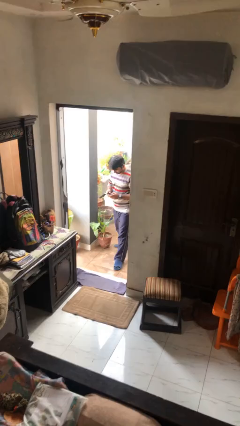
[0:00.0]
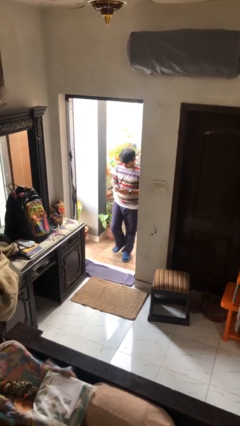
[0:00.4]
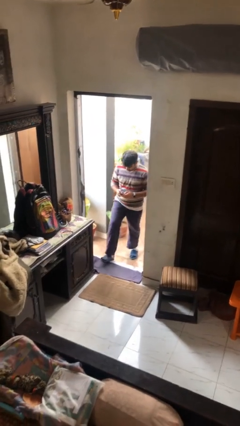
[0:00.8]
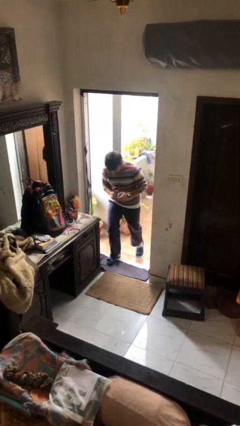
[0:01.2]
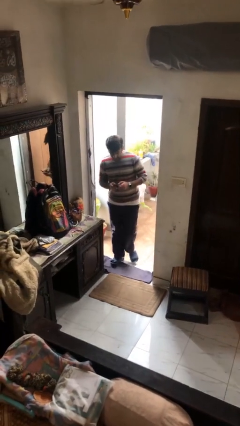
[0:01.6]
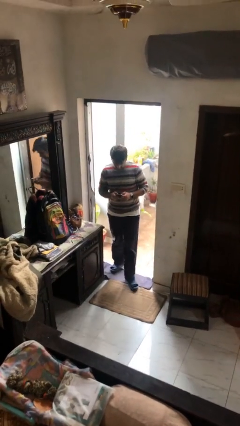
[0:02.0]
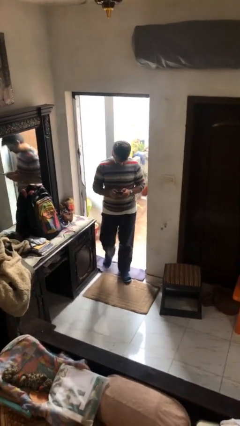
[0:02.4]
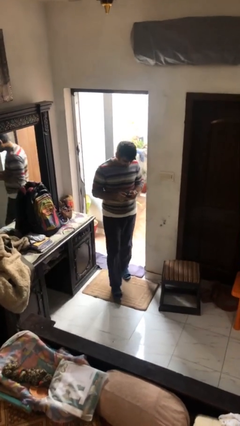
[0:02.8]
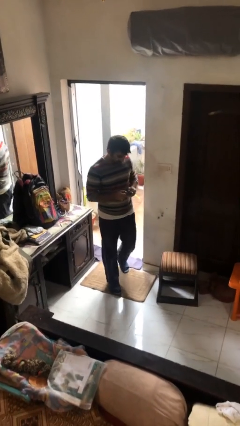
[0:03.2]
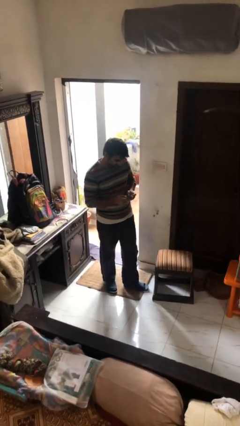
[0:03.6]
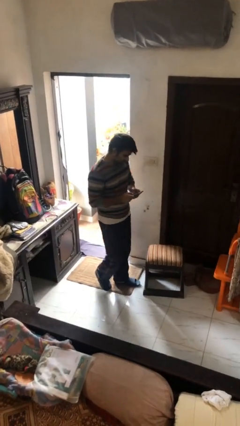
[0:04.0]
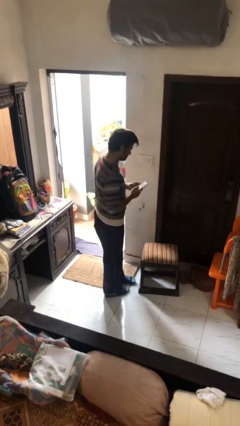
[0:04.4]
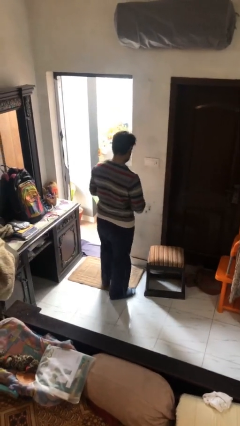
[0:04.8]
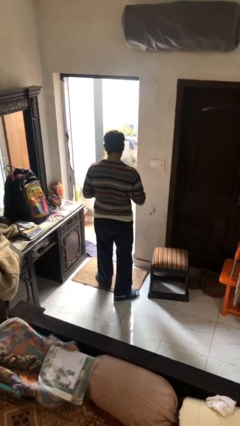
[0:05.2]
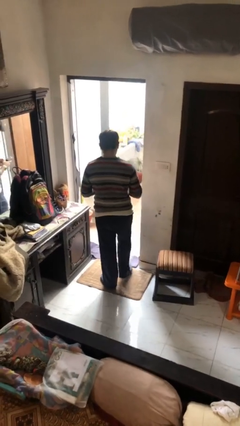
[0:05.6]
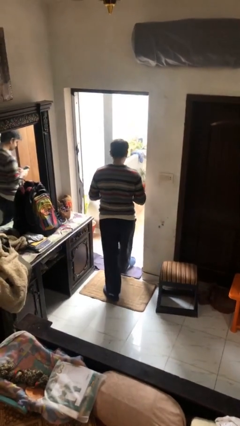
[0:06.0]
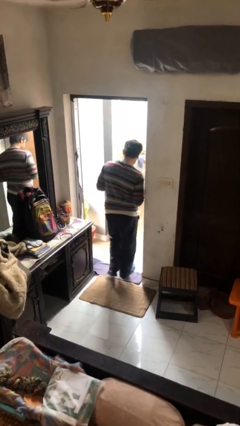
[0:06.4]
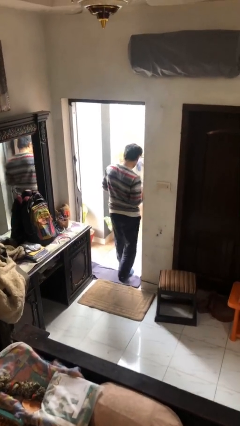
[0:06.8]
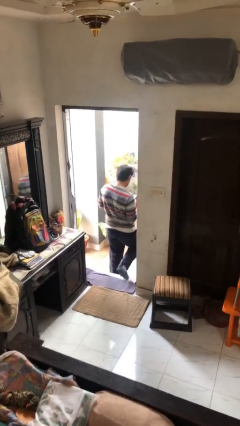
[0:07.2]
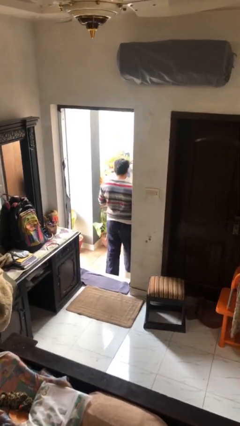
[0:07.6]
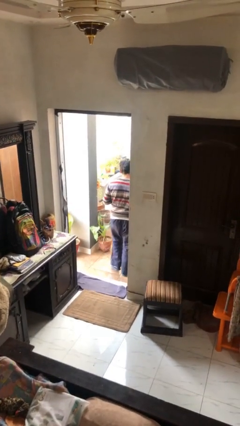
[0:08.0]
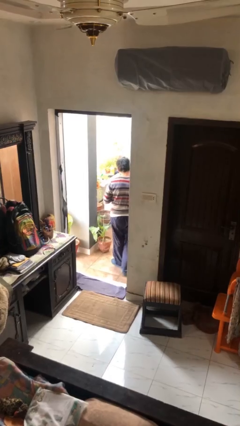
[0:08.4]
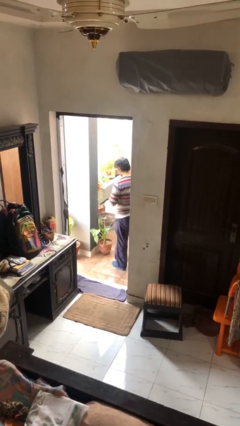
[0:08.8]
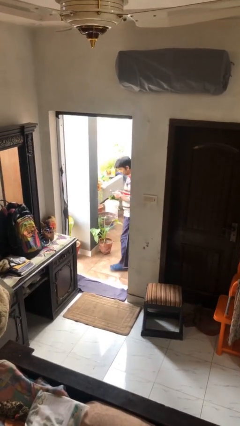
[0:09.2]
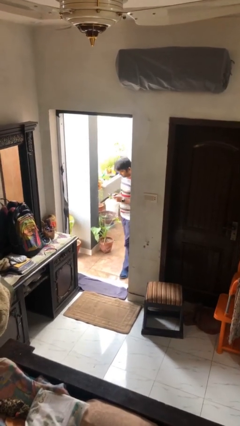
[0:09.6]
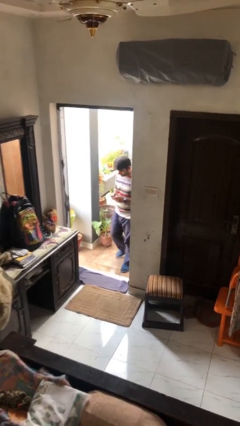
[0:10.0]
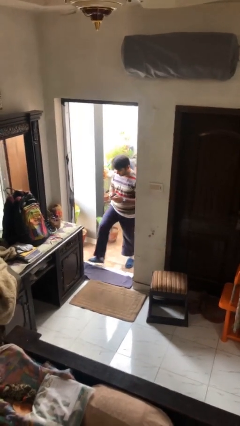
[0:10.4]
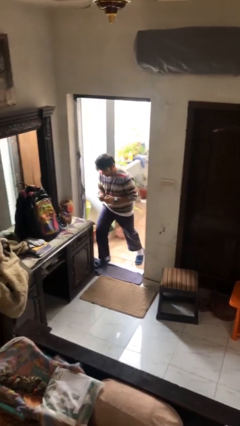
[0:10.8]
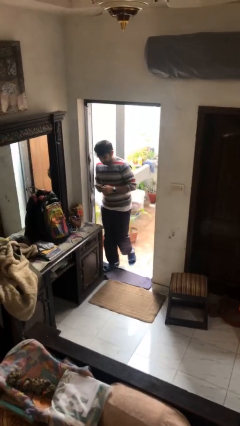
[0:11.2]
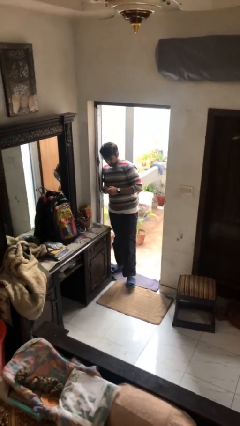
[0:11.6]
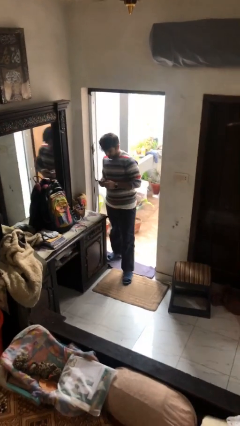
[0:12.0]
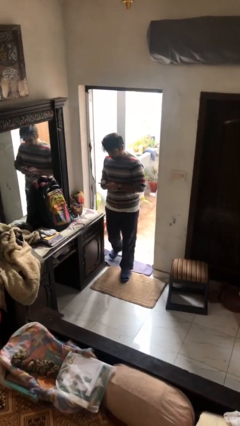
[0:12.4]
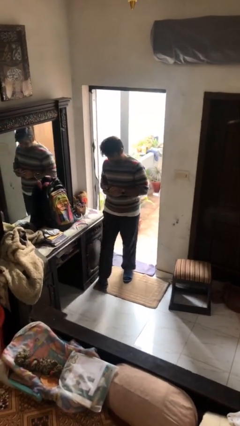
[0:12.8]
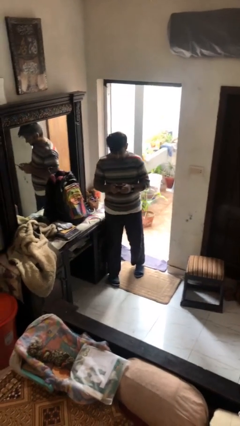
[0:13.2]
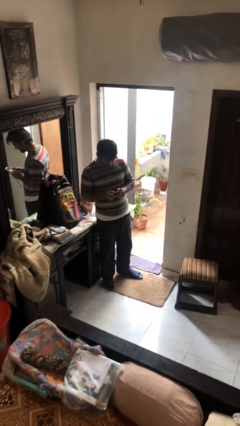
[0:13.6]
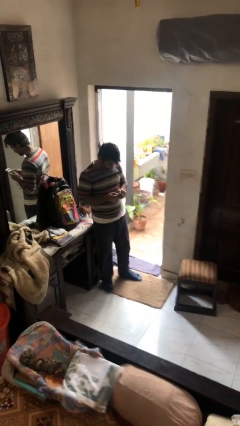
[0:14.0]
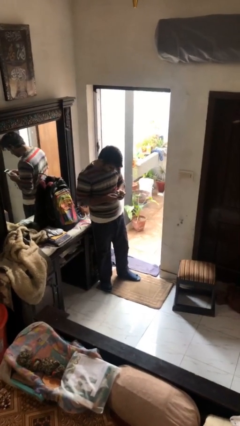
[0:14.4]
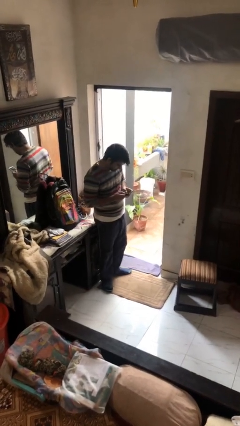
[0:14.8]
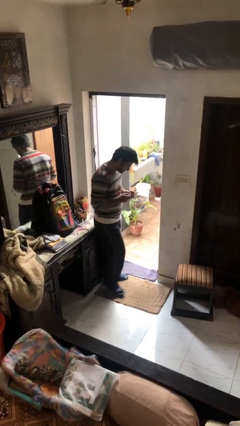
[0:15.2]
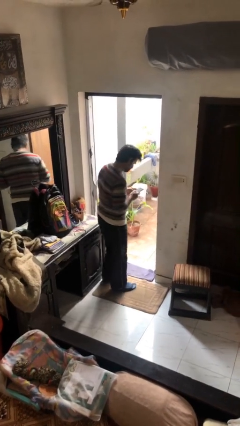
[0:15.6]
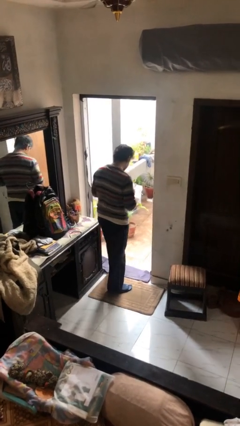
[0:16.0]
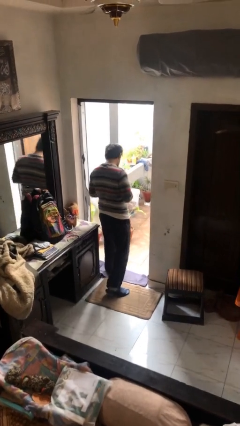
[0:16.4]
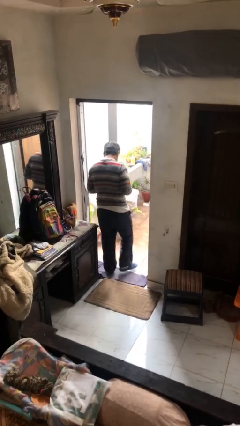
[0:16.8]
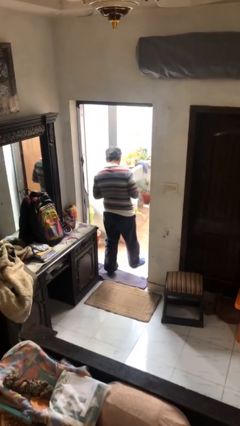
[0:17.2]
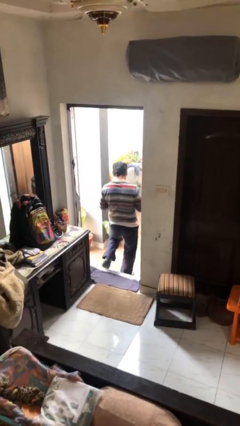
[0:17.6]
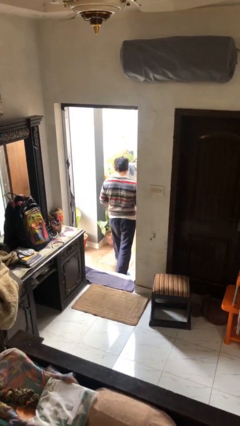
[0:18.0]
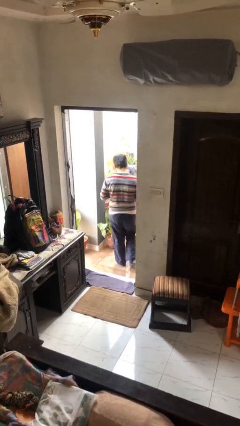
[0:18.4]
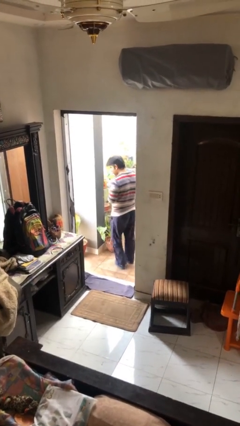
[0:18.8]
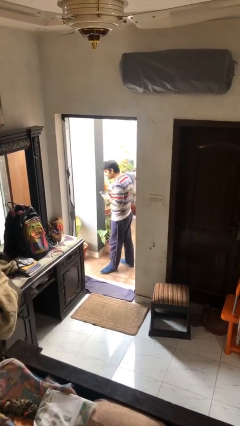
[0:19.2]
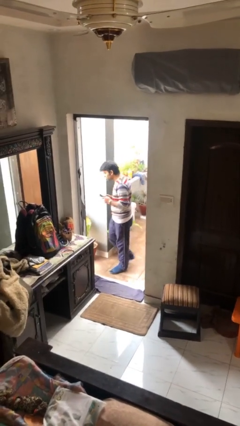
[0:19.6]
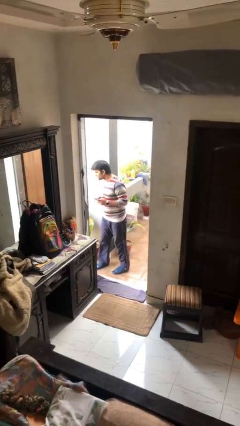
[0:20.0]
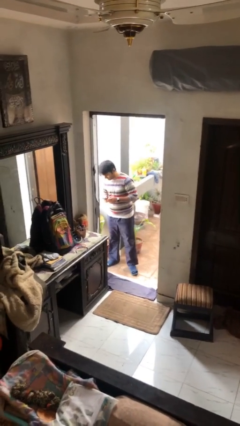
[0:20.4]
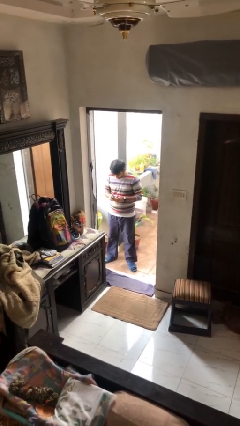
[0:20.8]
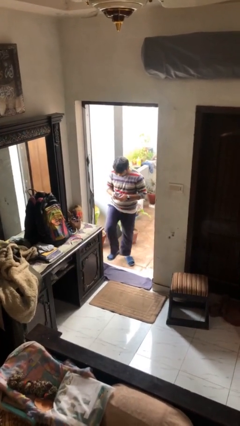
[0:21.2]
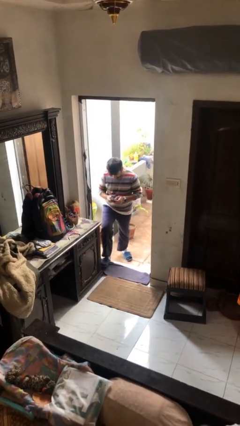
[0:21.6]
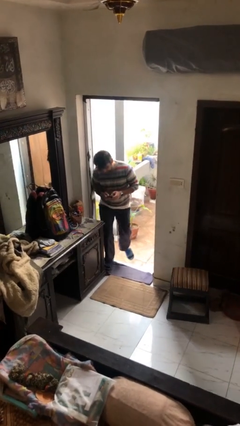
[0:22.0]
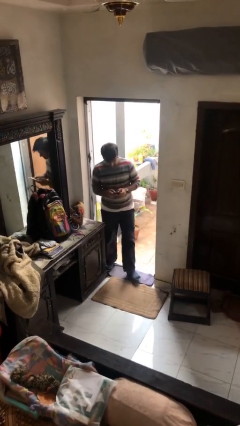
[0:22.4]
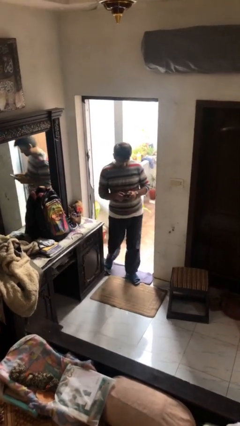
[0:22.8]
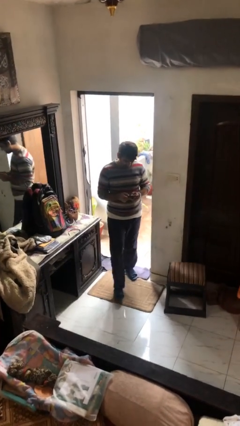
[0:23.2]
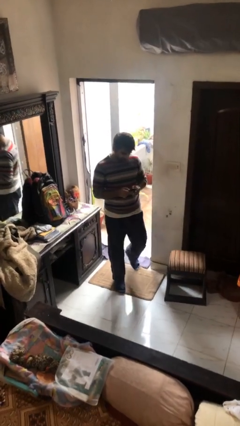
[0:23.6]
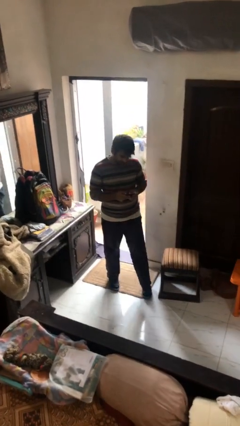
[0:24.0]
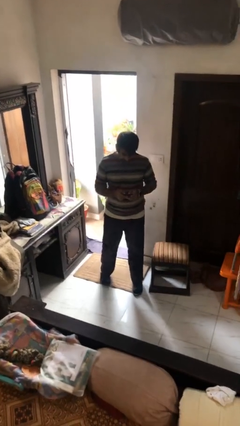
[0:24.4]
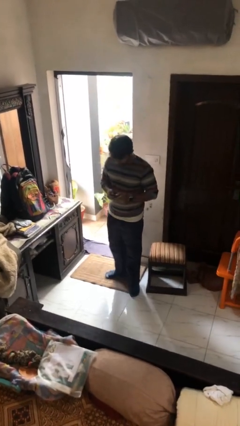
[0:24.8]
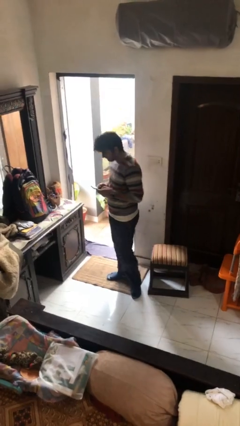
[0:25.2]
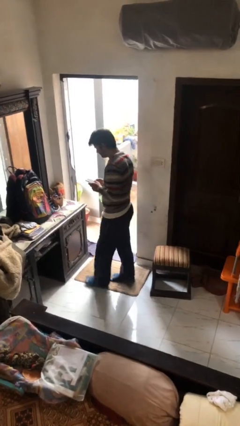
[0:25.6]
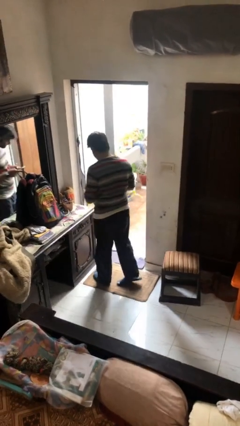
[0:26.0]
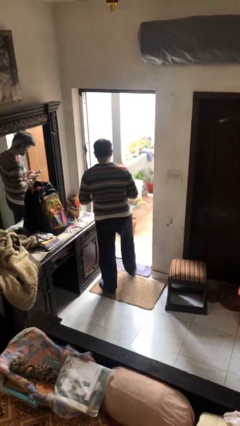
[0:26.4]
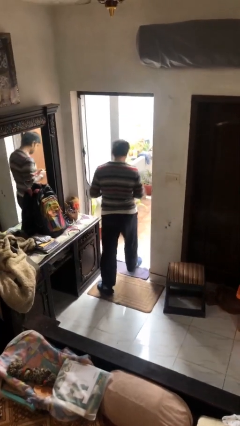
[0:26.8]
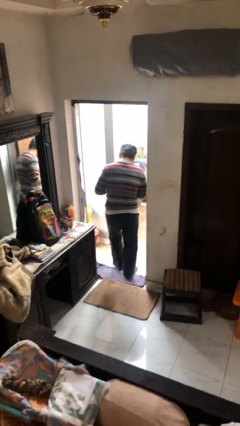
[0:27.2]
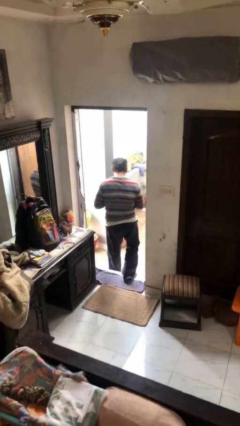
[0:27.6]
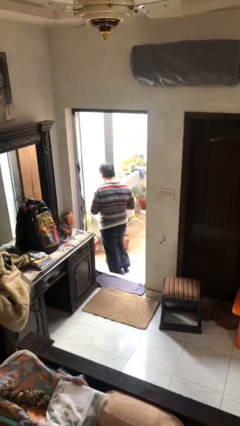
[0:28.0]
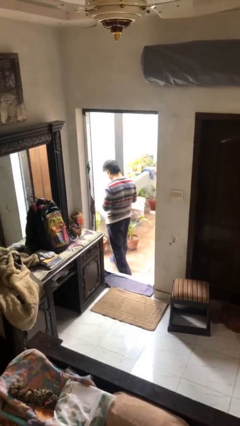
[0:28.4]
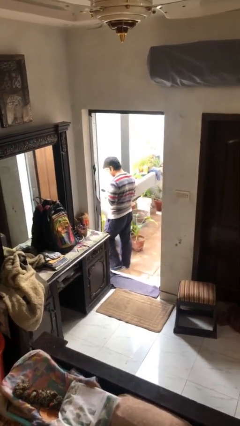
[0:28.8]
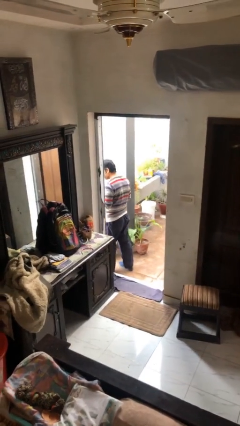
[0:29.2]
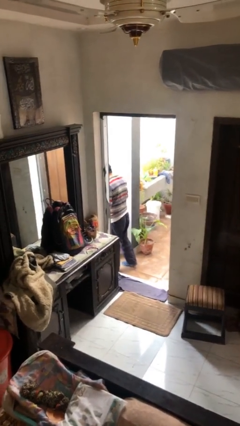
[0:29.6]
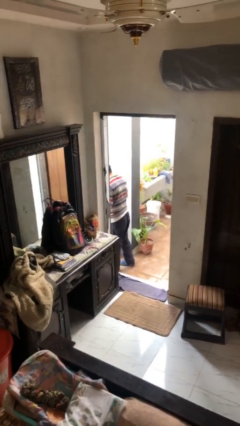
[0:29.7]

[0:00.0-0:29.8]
person texts on phone

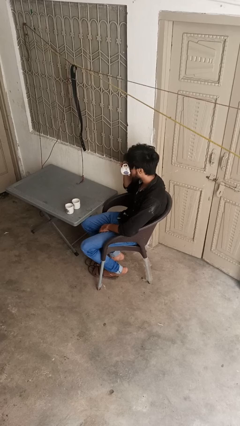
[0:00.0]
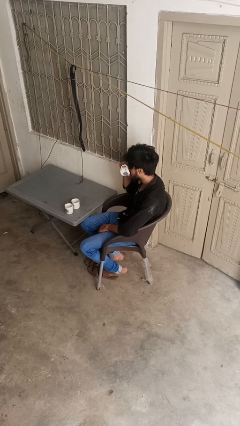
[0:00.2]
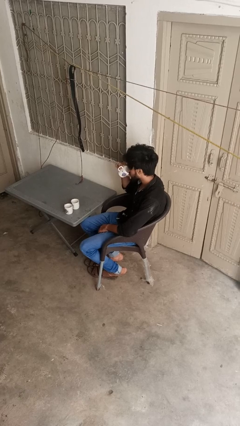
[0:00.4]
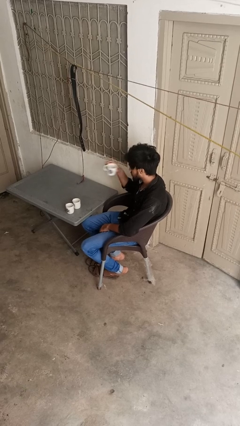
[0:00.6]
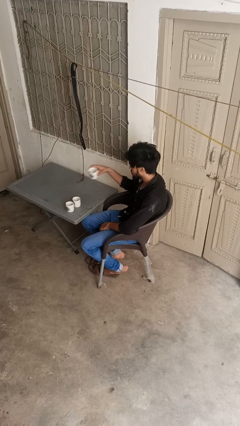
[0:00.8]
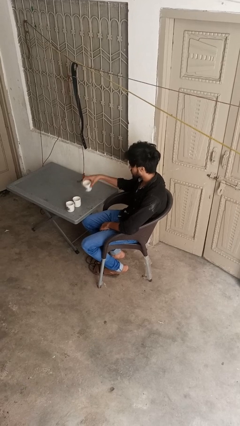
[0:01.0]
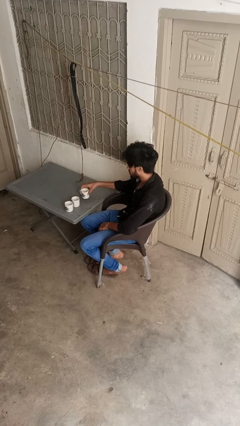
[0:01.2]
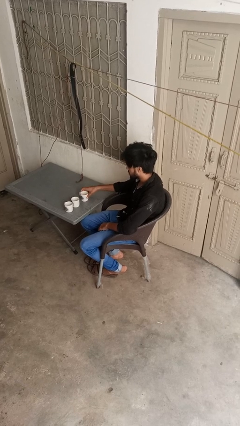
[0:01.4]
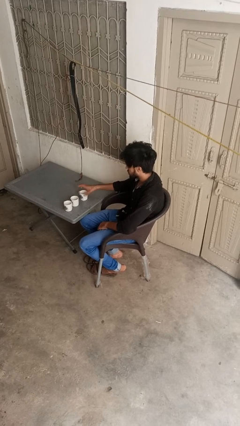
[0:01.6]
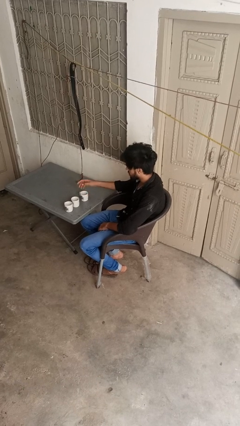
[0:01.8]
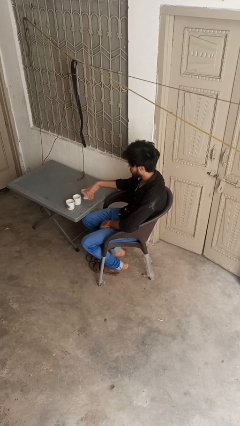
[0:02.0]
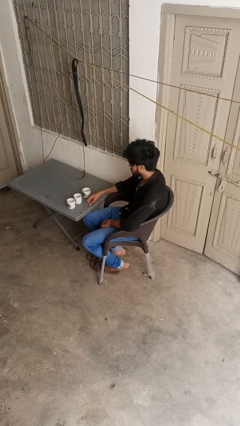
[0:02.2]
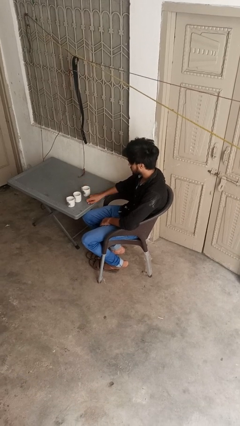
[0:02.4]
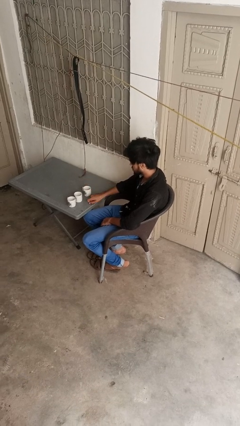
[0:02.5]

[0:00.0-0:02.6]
person puts down object on table

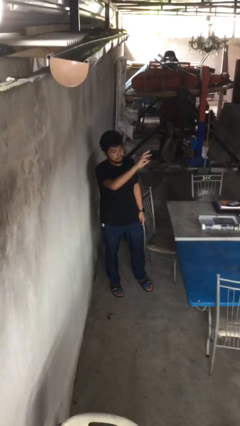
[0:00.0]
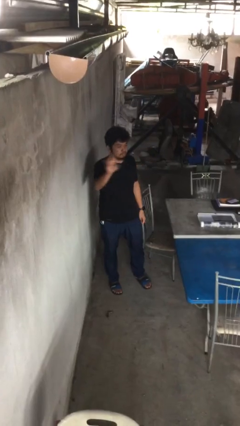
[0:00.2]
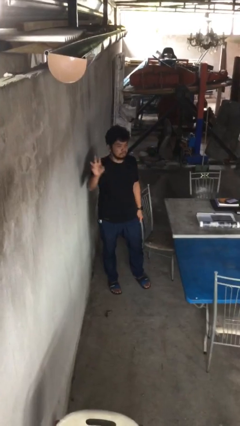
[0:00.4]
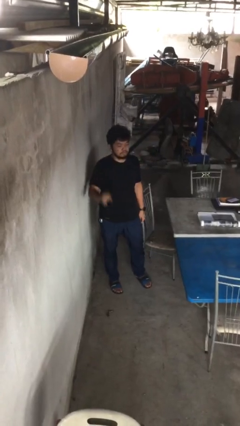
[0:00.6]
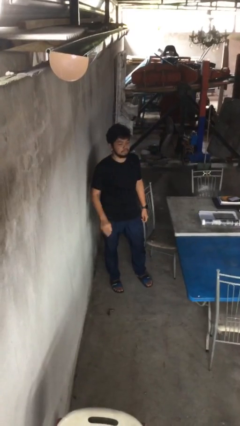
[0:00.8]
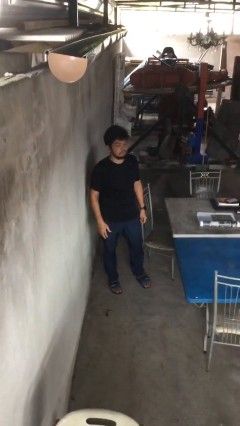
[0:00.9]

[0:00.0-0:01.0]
person gestures swipe right
